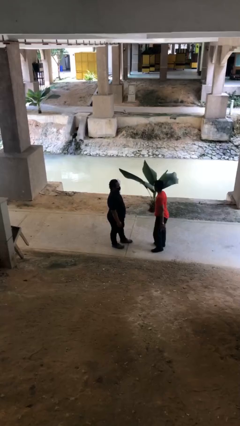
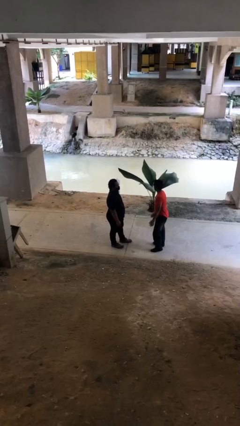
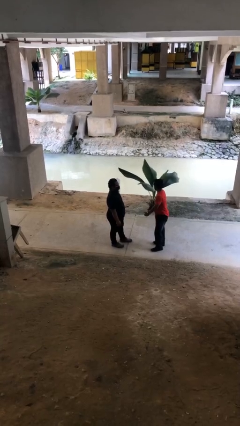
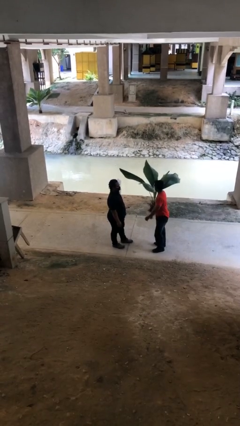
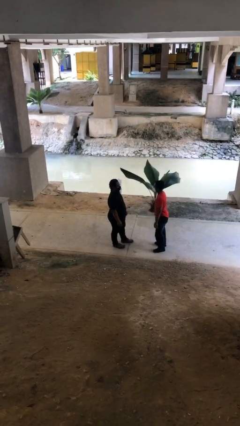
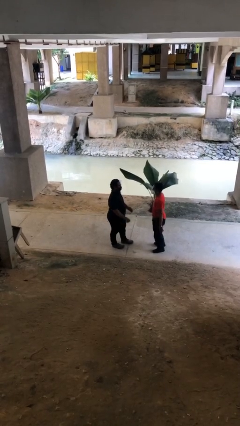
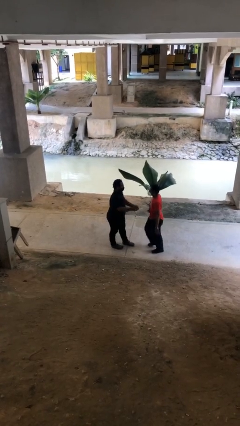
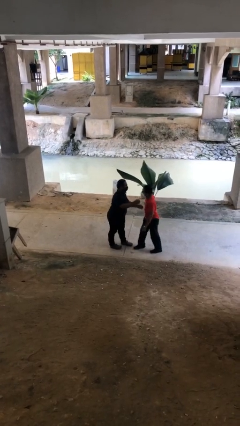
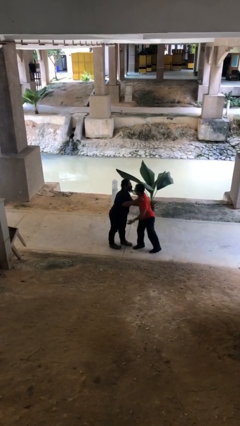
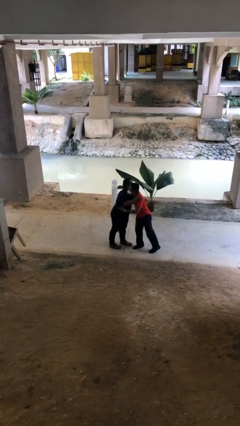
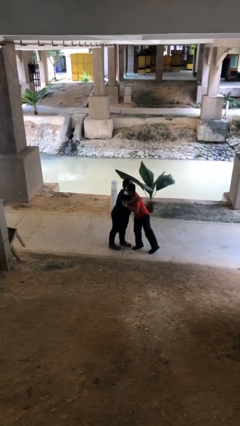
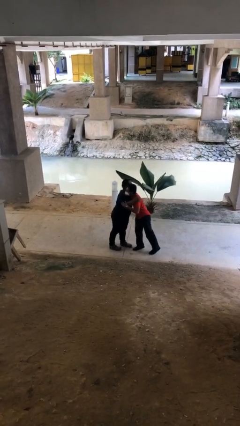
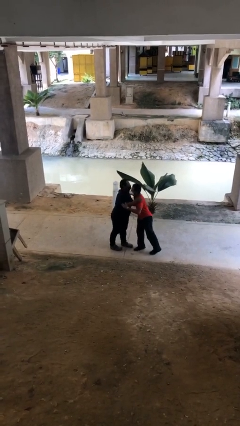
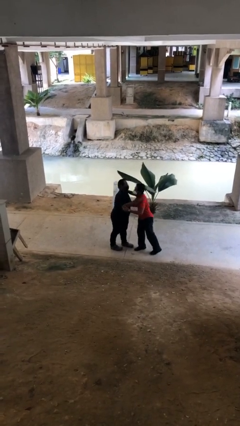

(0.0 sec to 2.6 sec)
person embraces person

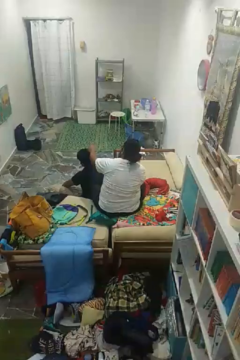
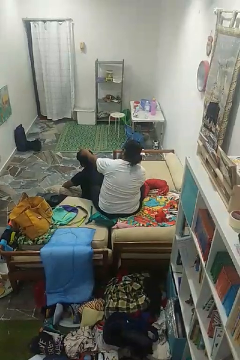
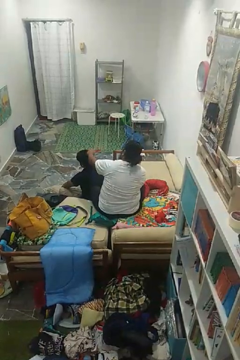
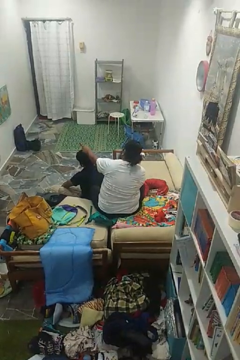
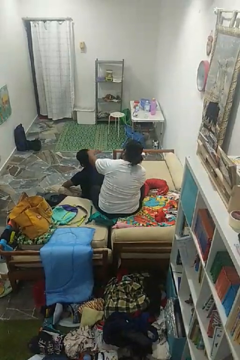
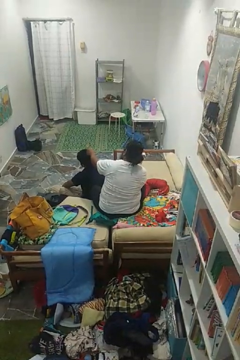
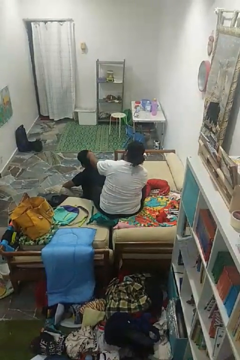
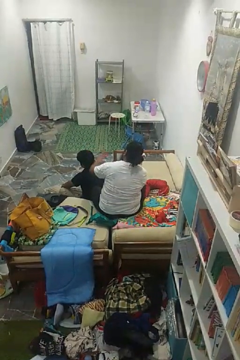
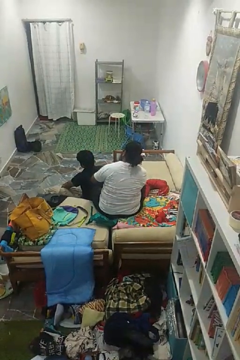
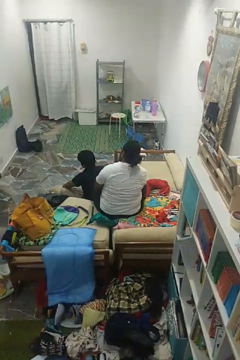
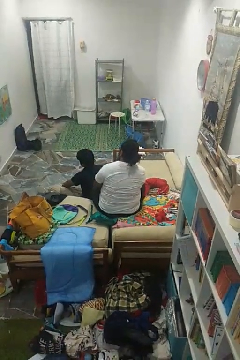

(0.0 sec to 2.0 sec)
person brushes hair of person

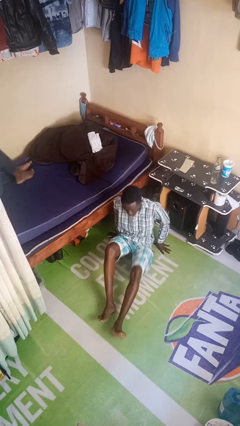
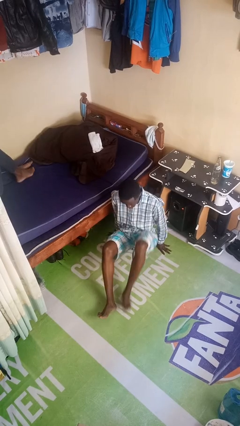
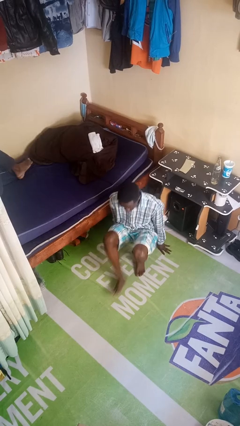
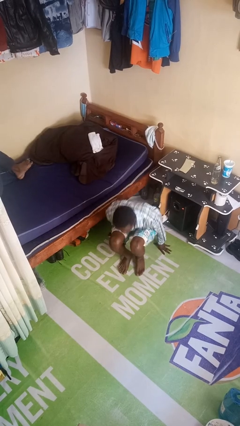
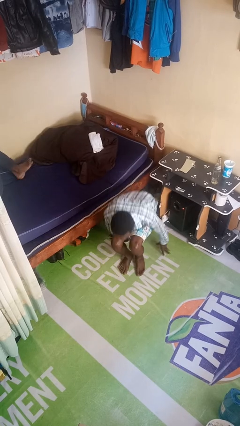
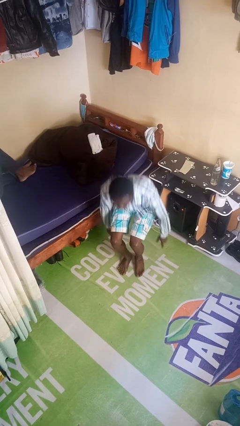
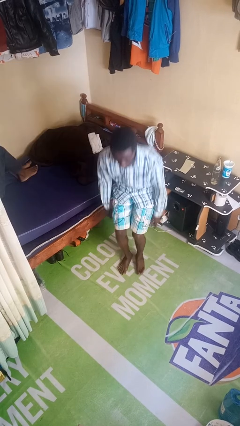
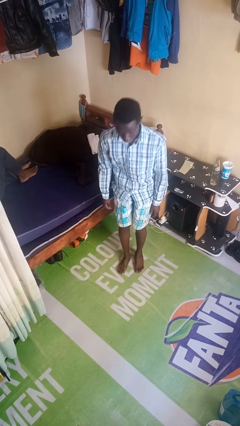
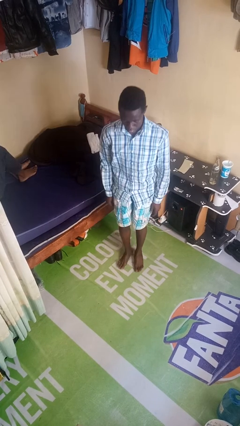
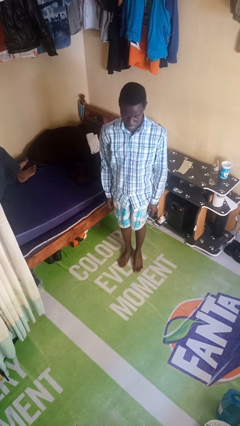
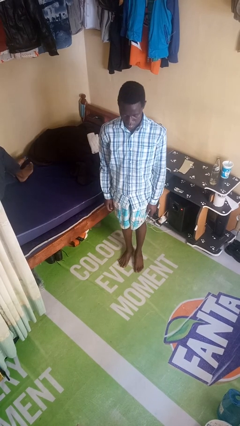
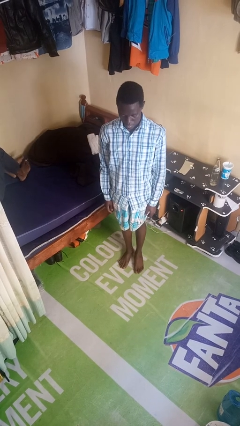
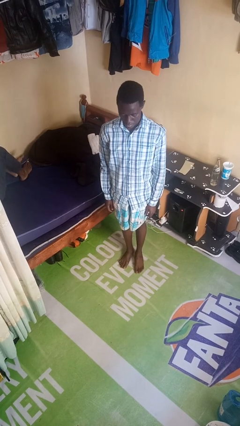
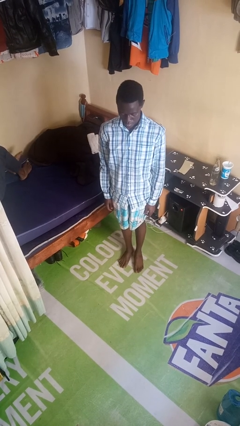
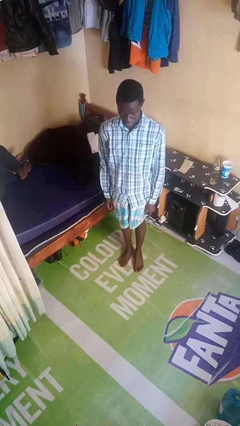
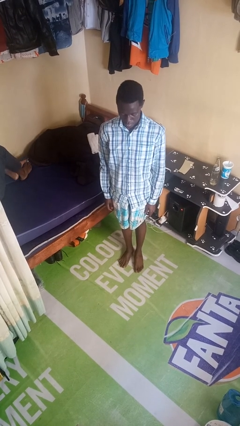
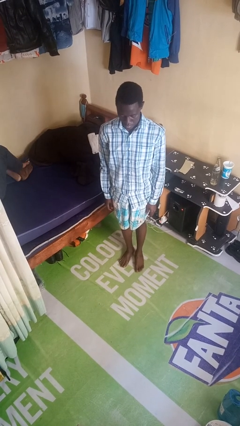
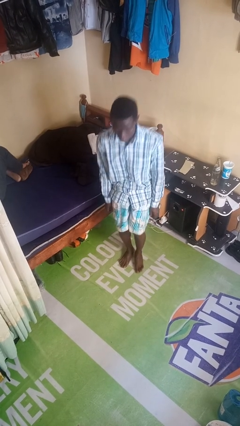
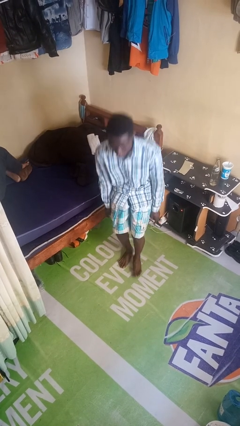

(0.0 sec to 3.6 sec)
person stands up from floor

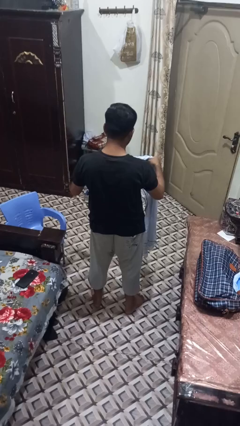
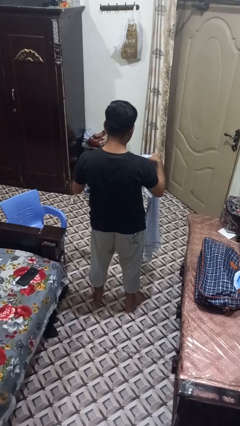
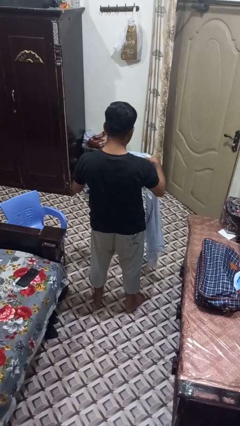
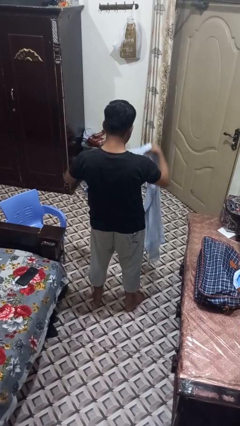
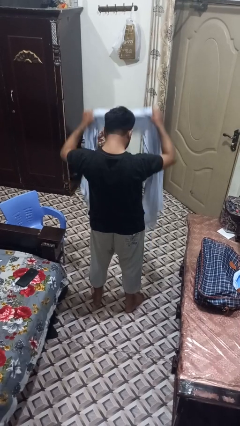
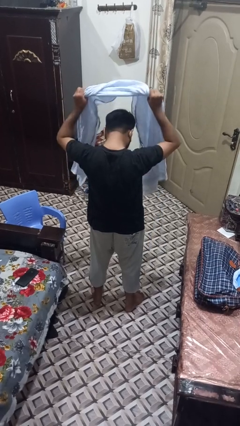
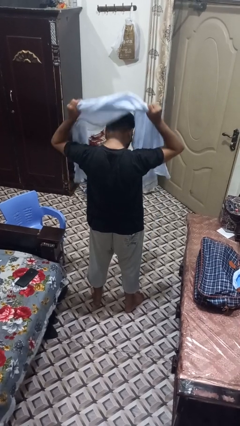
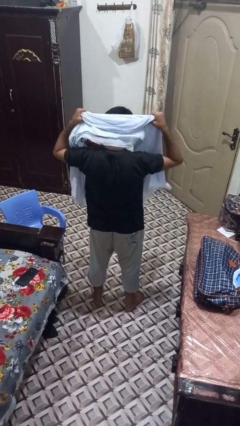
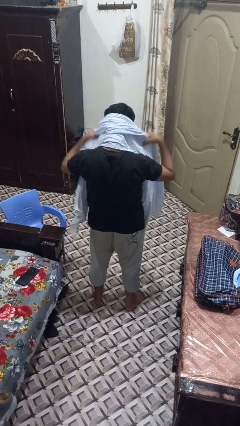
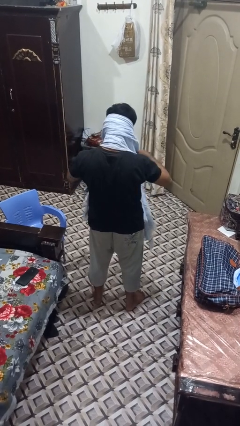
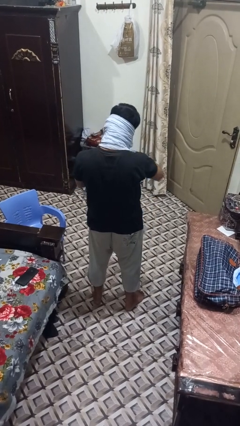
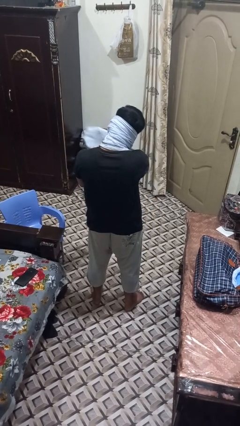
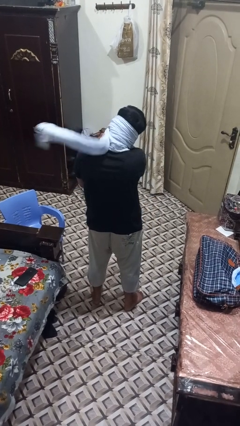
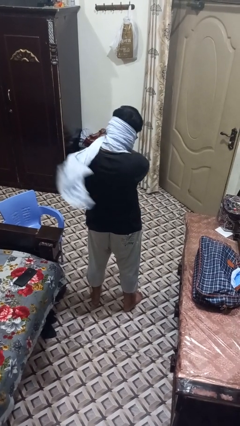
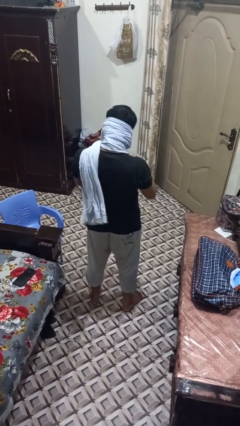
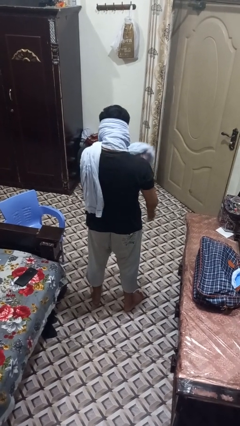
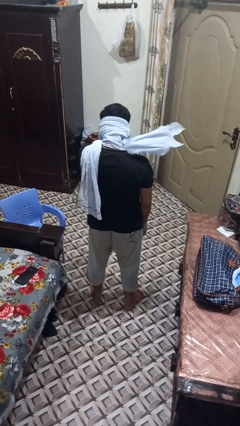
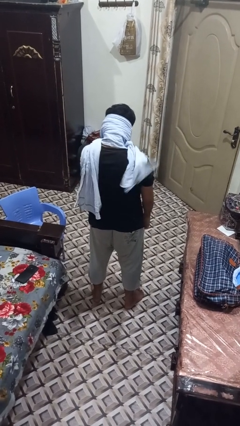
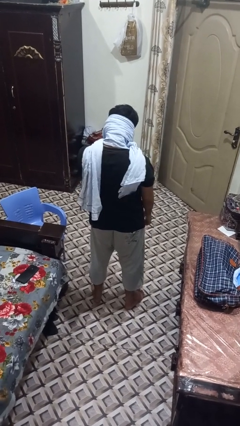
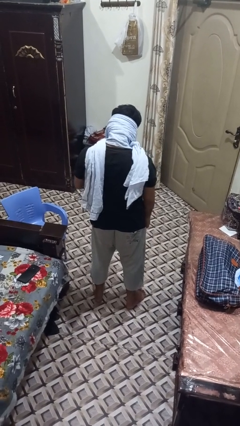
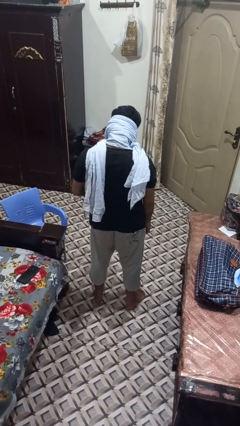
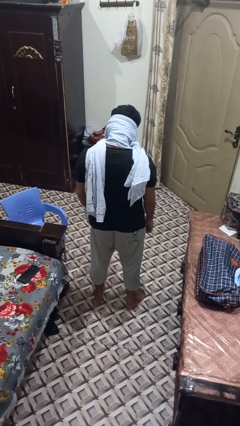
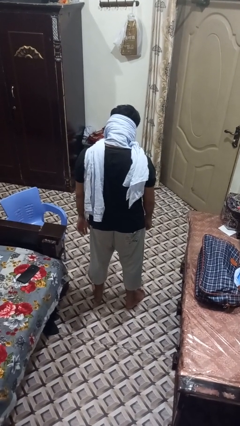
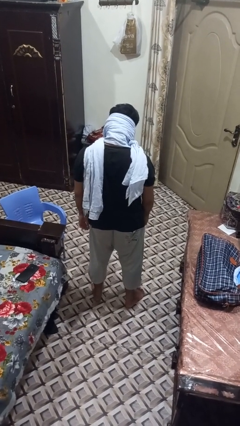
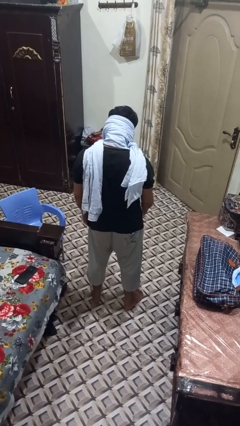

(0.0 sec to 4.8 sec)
person puts on scarf

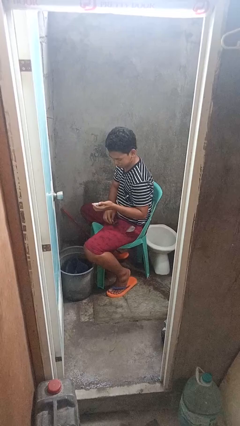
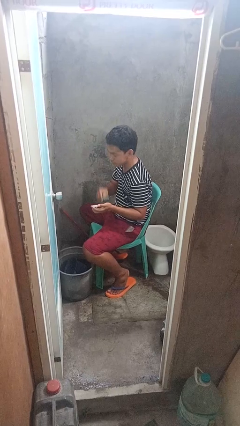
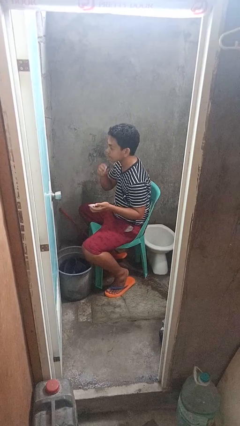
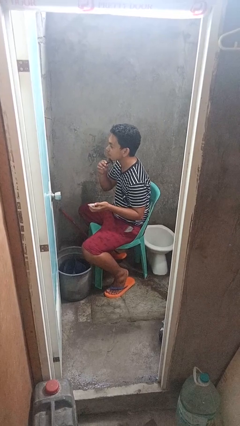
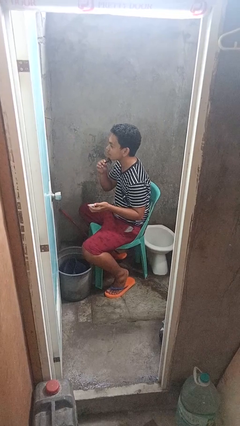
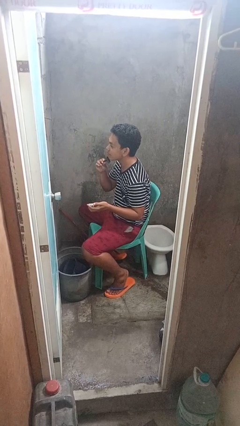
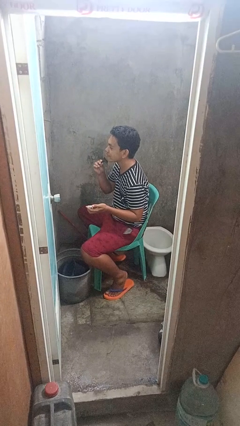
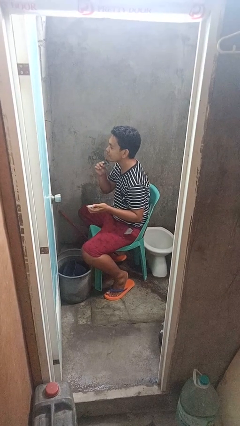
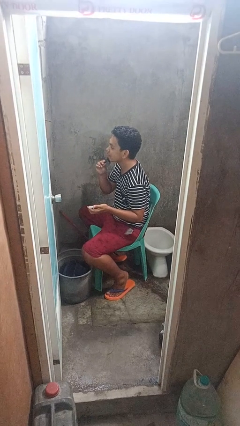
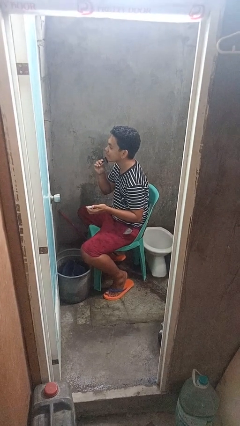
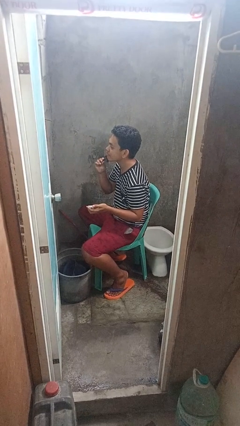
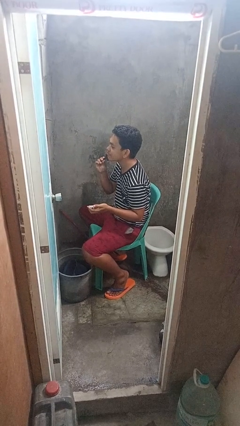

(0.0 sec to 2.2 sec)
person shaves face

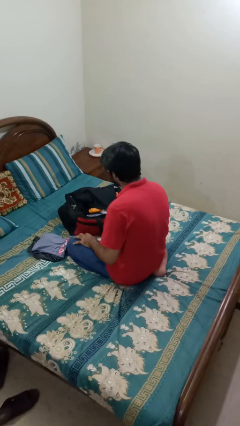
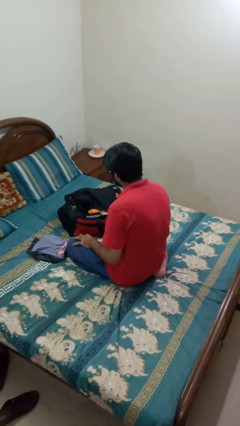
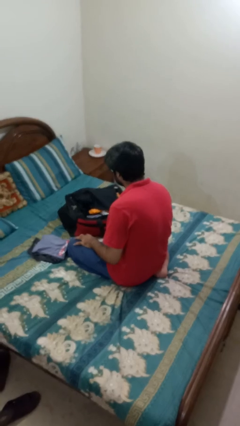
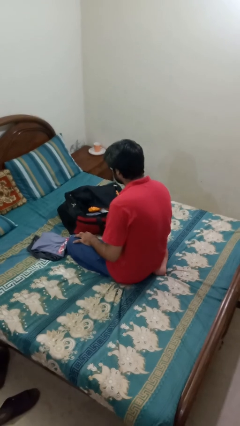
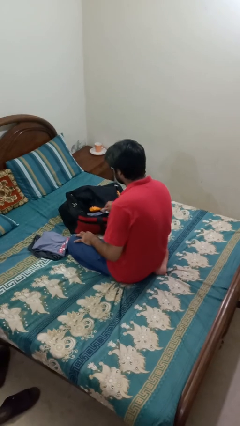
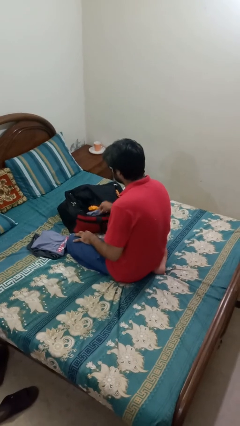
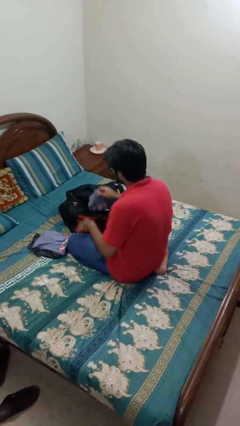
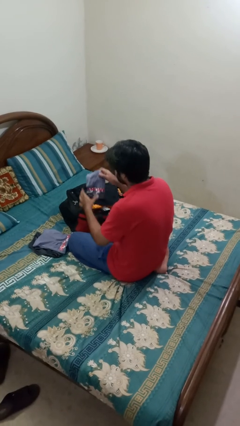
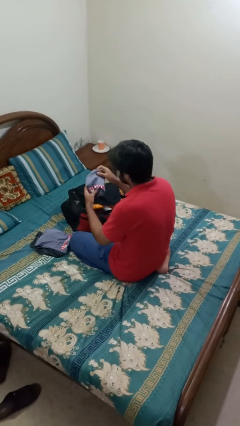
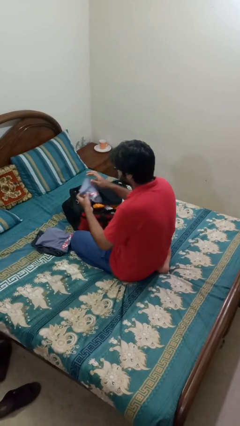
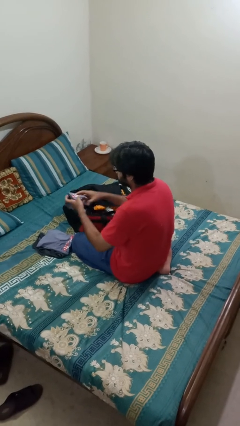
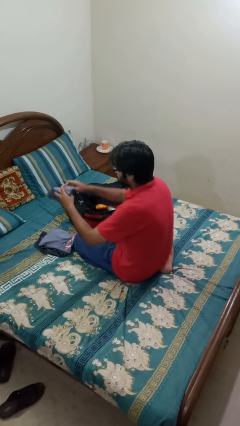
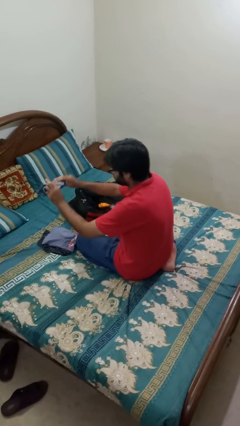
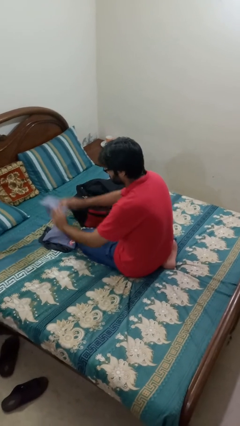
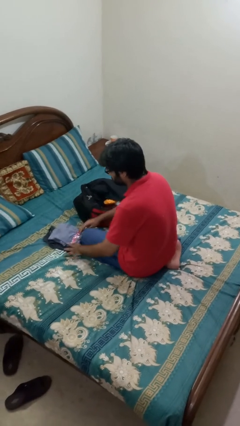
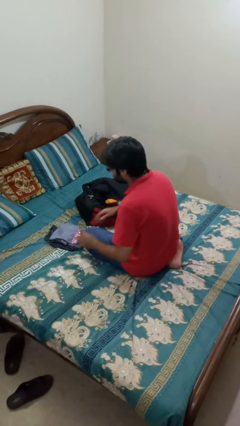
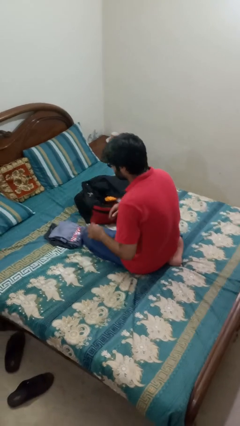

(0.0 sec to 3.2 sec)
person unloads clothes from suitcase
